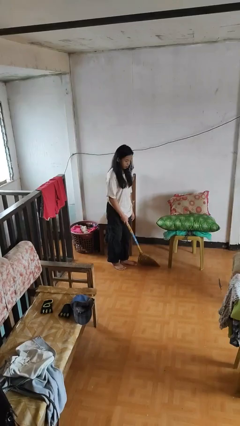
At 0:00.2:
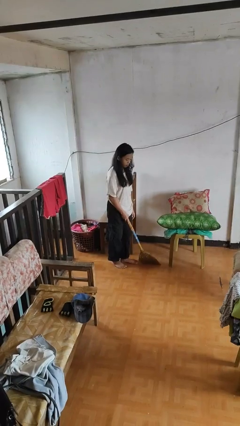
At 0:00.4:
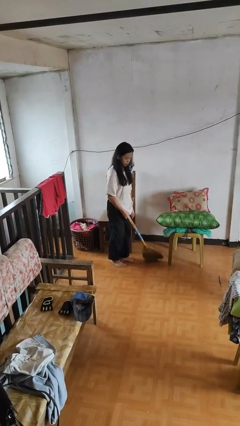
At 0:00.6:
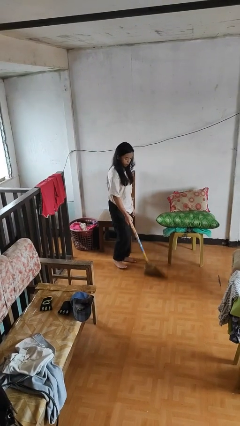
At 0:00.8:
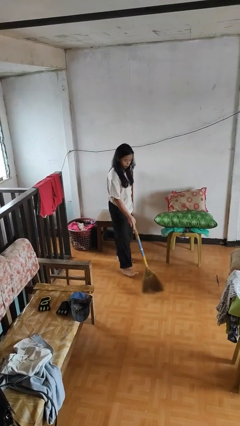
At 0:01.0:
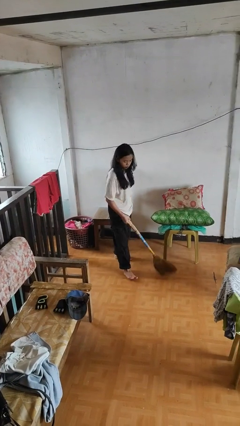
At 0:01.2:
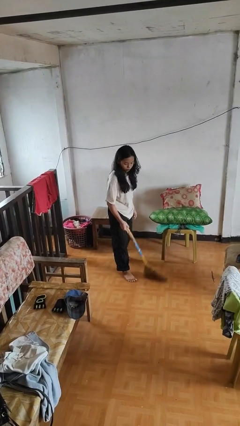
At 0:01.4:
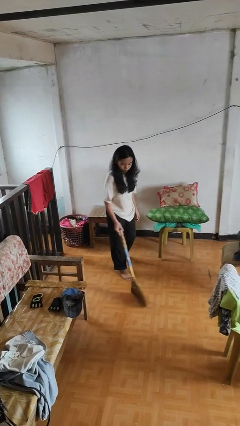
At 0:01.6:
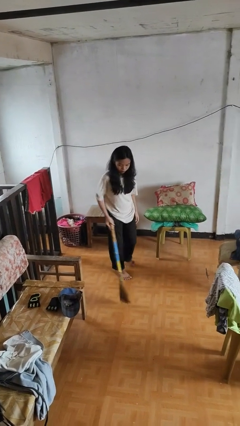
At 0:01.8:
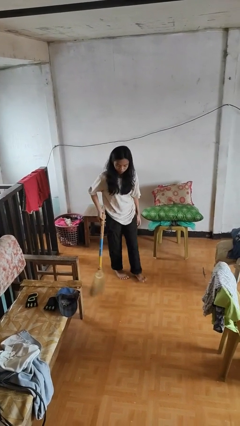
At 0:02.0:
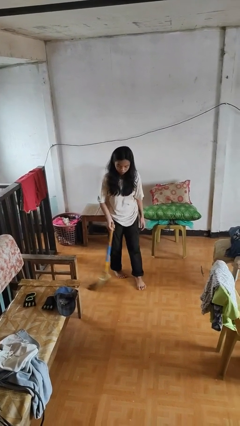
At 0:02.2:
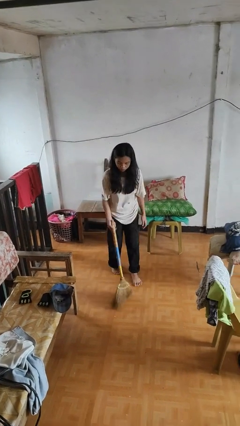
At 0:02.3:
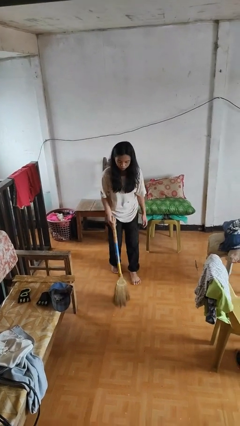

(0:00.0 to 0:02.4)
person sweeps floor

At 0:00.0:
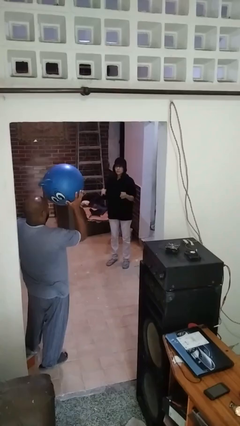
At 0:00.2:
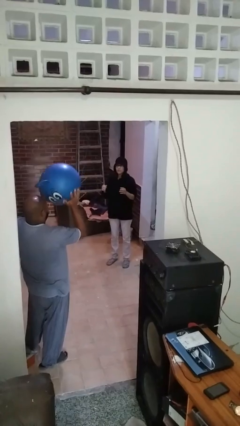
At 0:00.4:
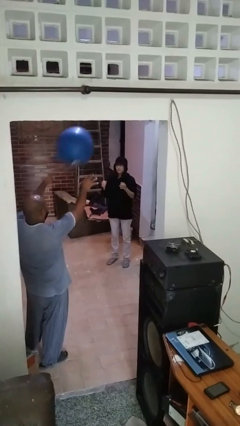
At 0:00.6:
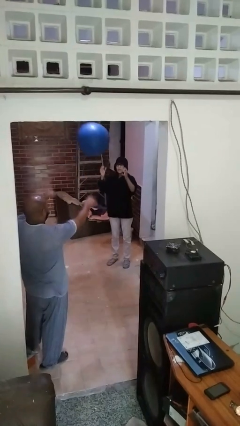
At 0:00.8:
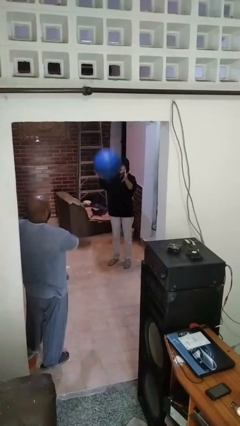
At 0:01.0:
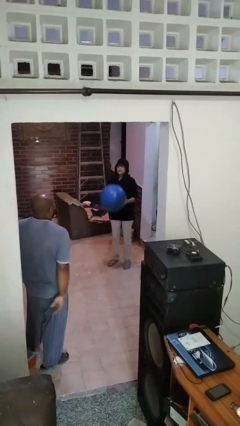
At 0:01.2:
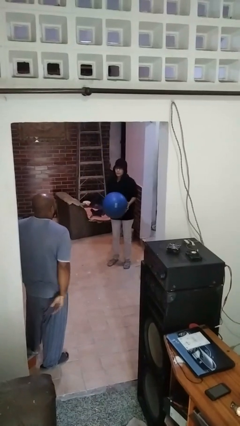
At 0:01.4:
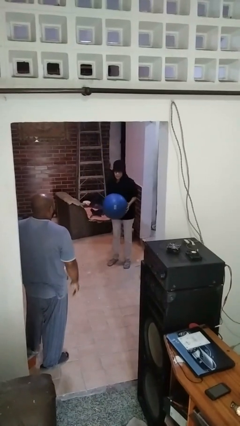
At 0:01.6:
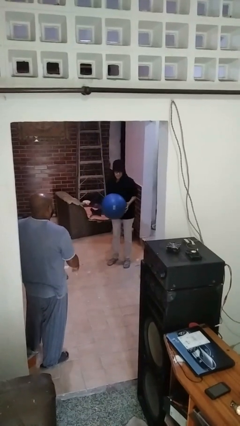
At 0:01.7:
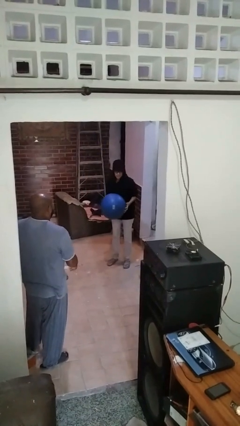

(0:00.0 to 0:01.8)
person catches object from person

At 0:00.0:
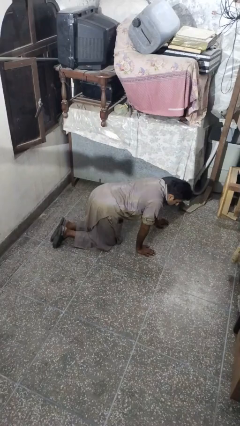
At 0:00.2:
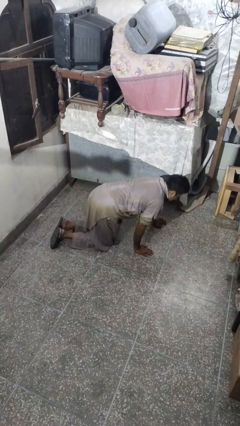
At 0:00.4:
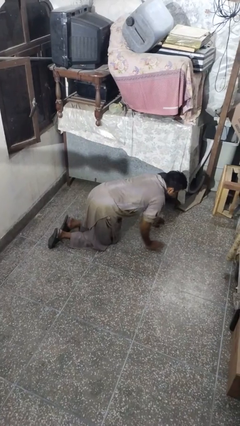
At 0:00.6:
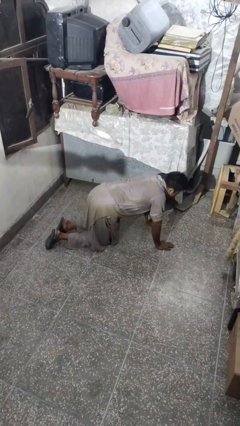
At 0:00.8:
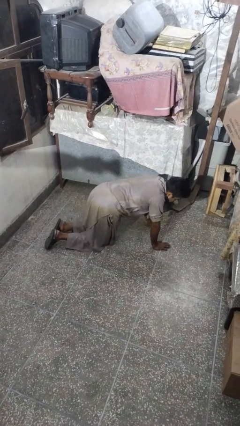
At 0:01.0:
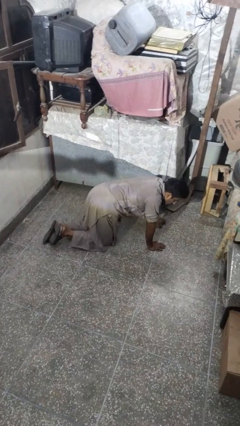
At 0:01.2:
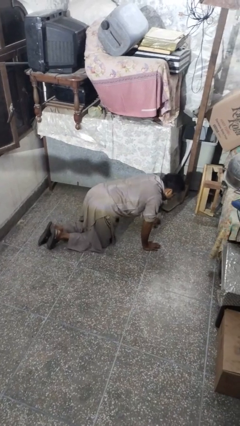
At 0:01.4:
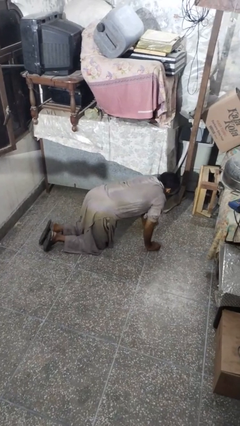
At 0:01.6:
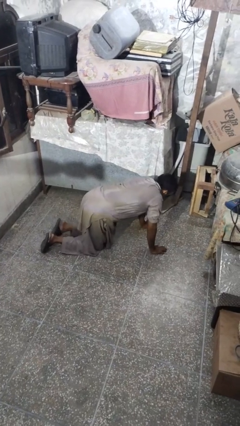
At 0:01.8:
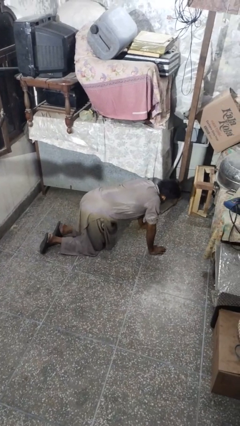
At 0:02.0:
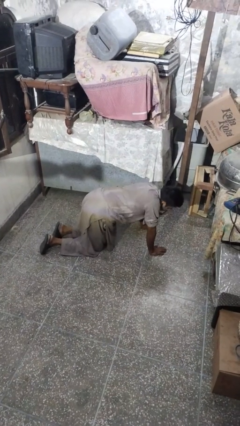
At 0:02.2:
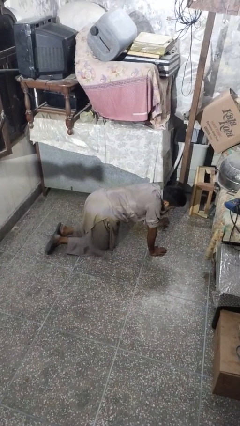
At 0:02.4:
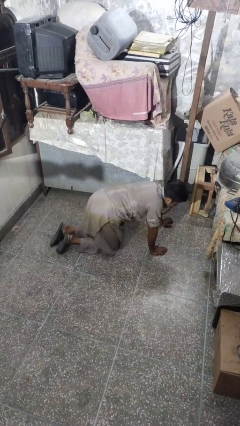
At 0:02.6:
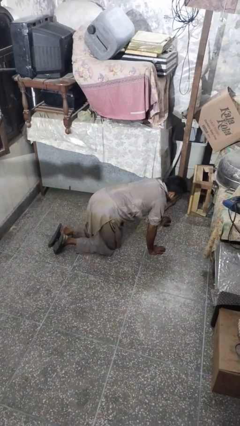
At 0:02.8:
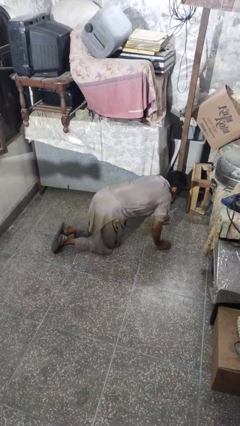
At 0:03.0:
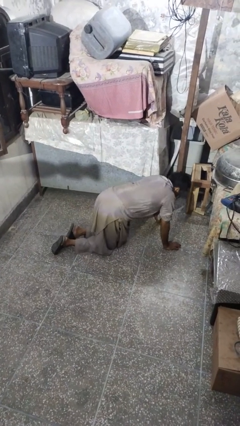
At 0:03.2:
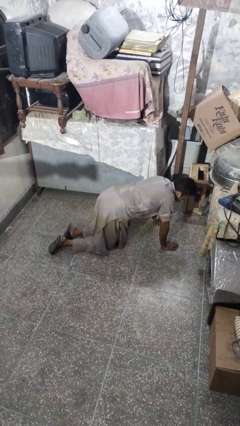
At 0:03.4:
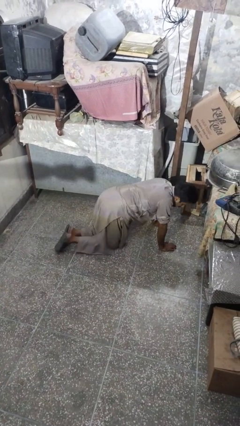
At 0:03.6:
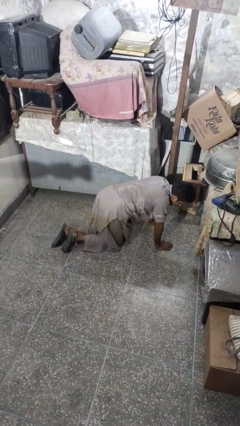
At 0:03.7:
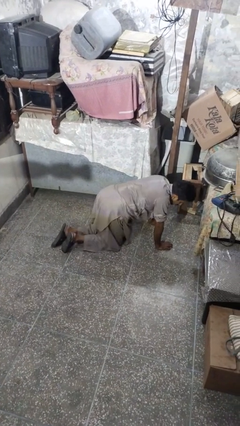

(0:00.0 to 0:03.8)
person crawls

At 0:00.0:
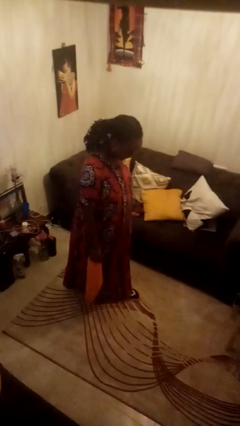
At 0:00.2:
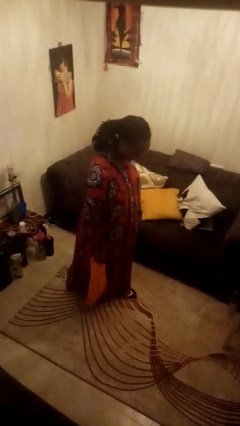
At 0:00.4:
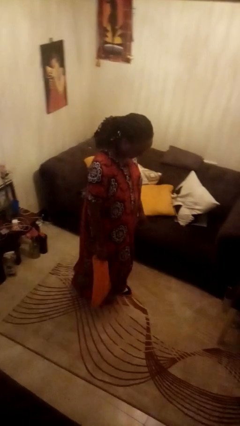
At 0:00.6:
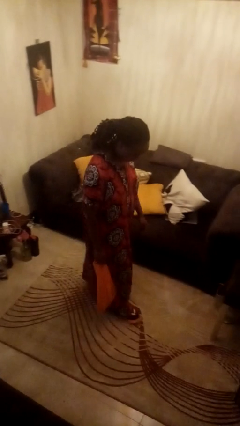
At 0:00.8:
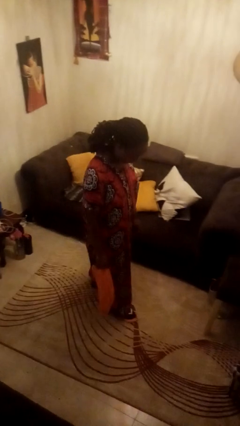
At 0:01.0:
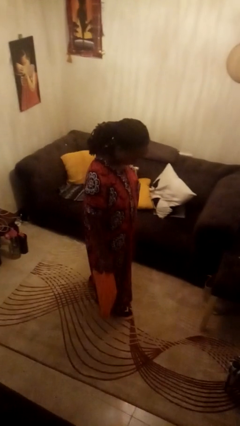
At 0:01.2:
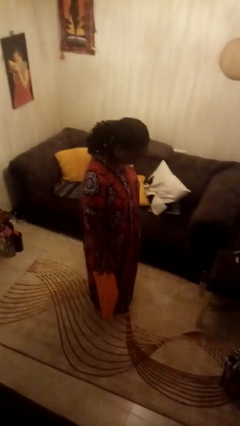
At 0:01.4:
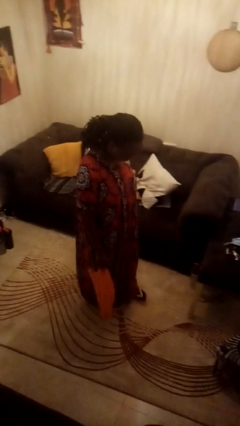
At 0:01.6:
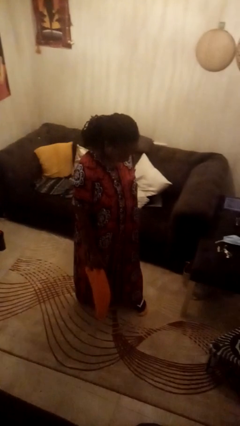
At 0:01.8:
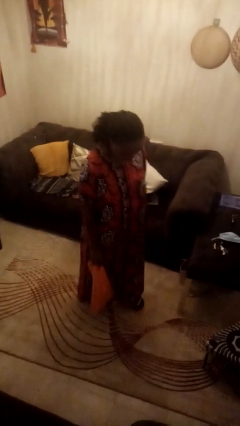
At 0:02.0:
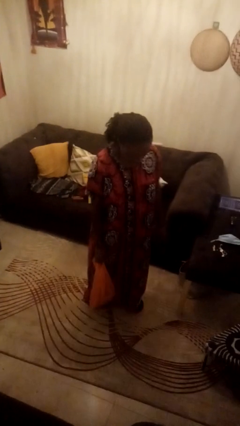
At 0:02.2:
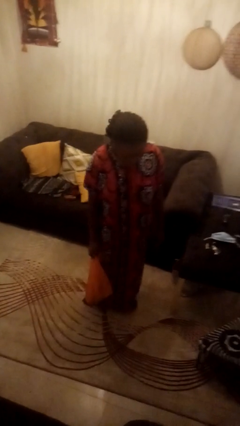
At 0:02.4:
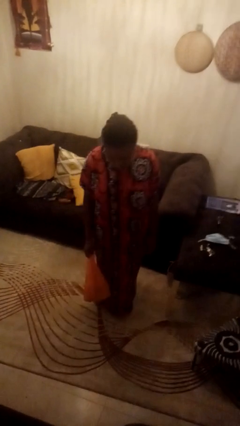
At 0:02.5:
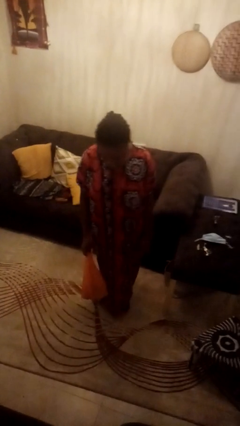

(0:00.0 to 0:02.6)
person carries groceries

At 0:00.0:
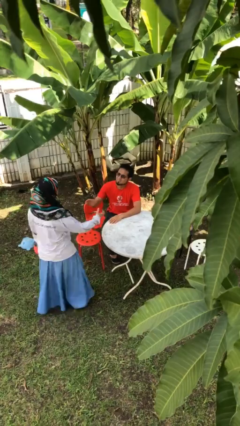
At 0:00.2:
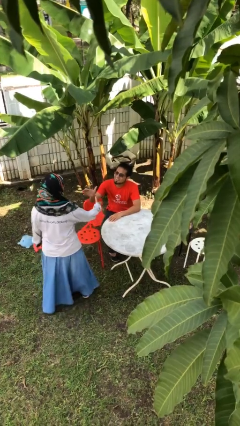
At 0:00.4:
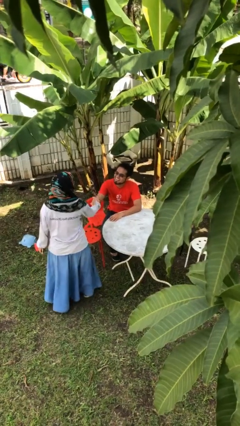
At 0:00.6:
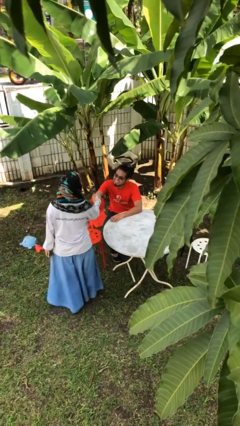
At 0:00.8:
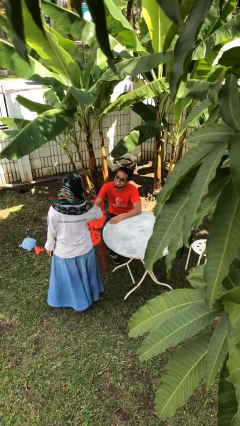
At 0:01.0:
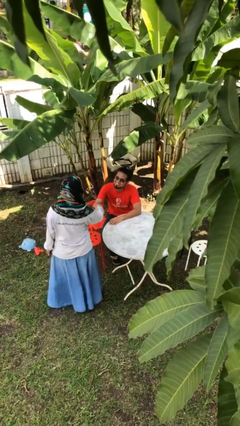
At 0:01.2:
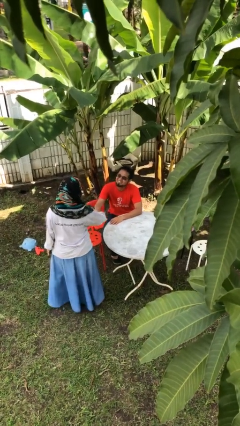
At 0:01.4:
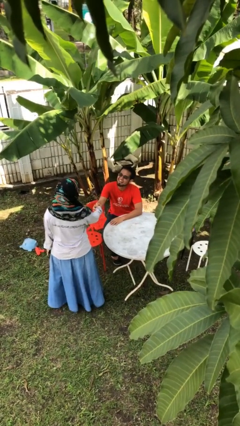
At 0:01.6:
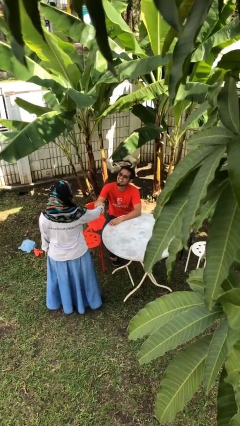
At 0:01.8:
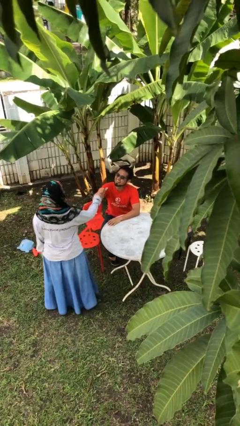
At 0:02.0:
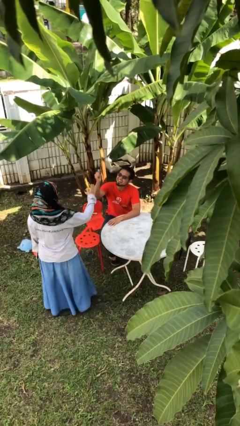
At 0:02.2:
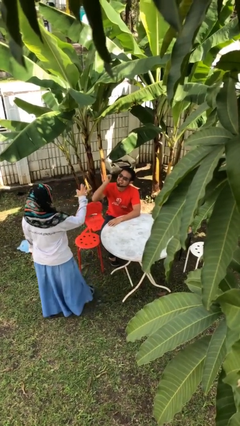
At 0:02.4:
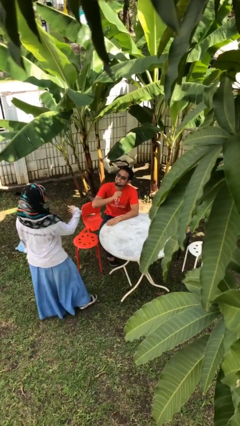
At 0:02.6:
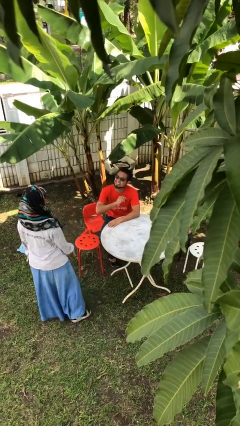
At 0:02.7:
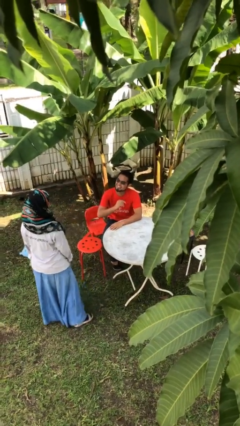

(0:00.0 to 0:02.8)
person shakes hand

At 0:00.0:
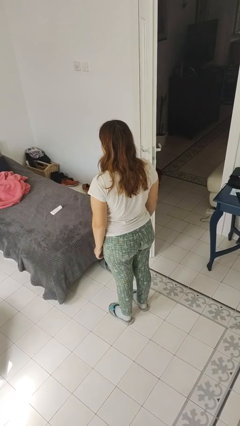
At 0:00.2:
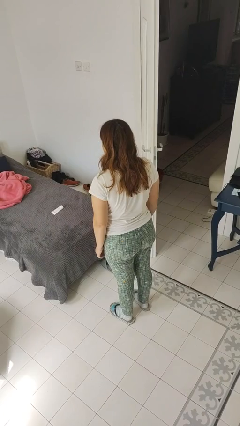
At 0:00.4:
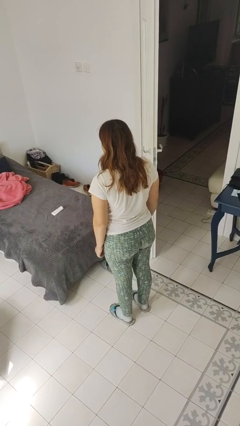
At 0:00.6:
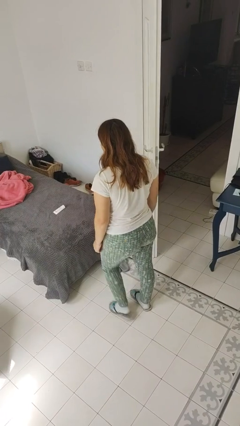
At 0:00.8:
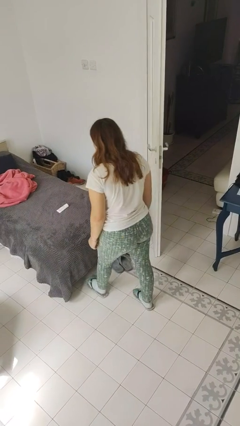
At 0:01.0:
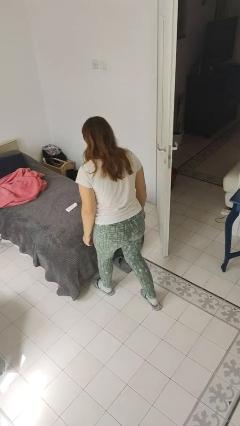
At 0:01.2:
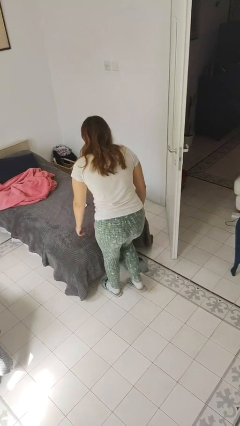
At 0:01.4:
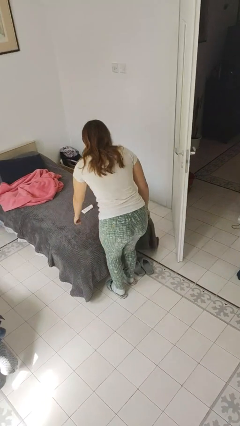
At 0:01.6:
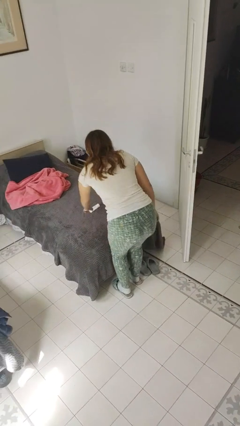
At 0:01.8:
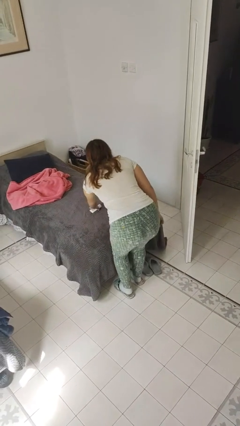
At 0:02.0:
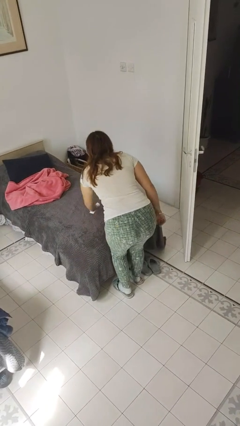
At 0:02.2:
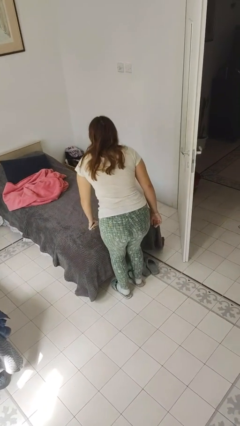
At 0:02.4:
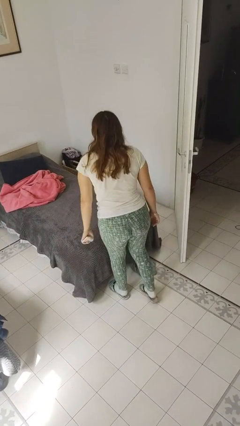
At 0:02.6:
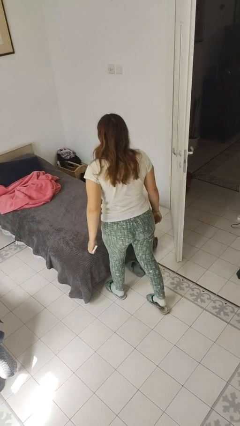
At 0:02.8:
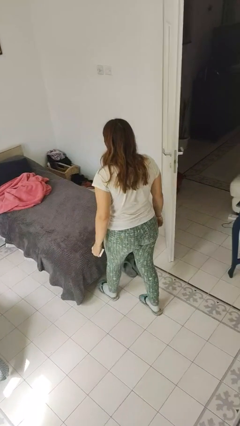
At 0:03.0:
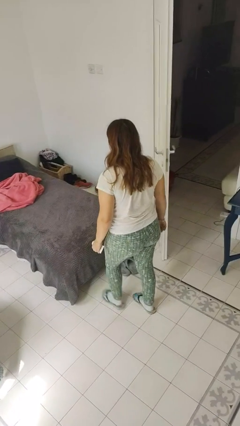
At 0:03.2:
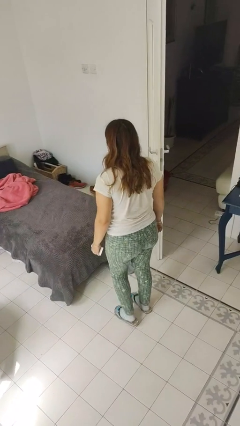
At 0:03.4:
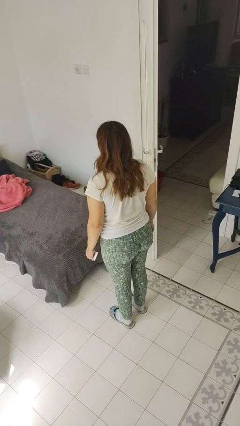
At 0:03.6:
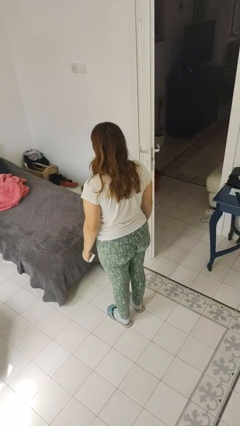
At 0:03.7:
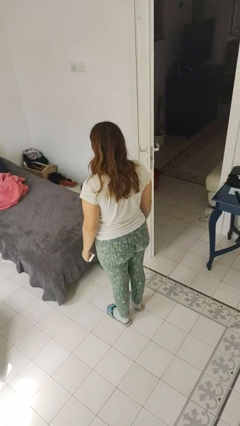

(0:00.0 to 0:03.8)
person picks up object from bed
